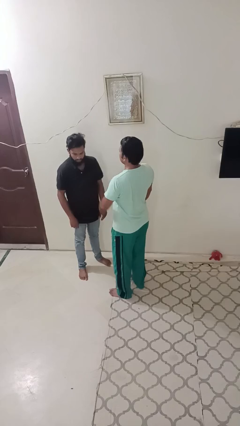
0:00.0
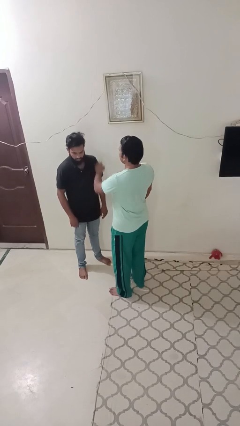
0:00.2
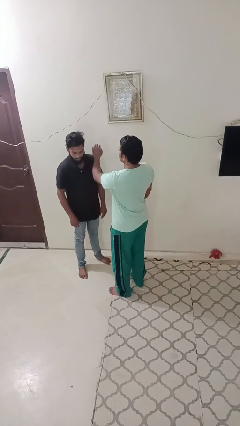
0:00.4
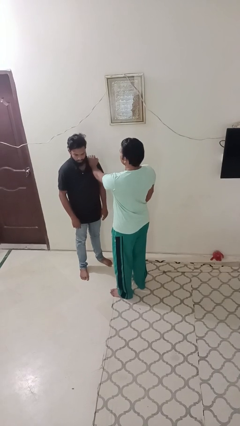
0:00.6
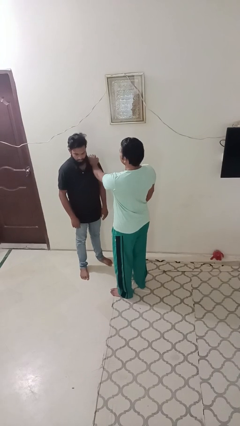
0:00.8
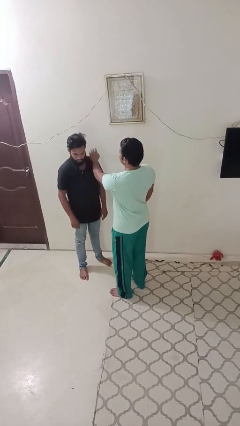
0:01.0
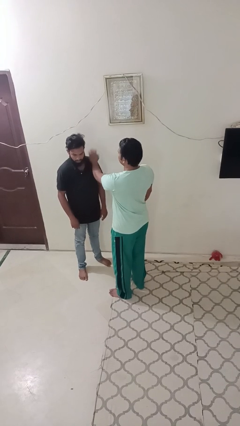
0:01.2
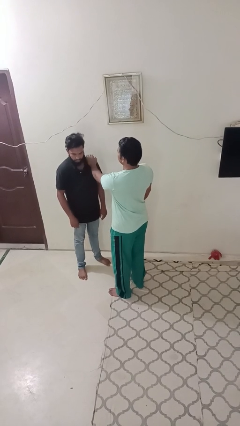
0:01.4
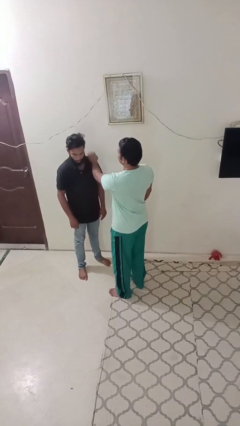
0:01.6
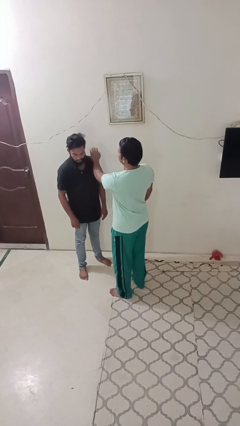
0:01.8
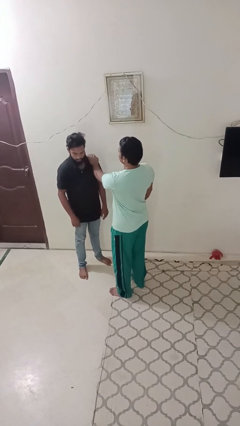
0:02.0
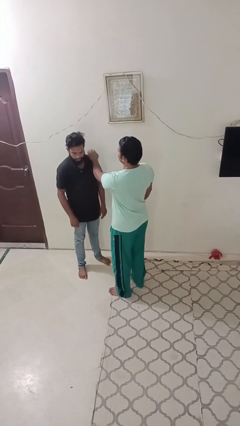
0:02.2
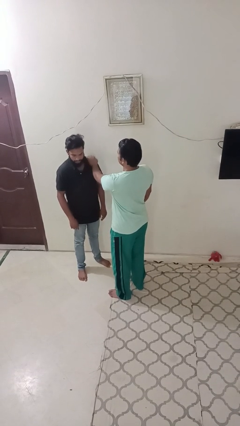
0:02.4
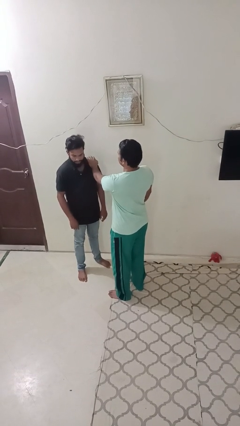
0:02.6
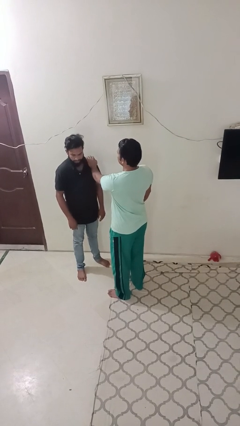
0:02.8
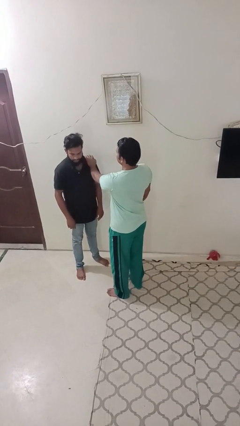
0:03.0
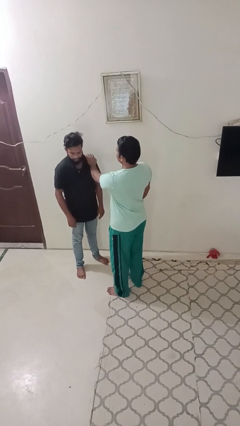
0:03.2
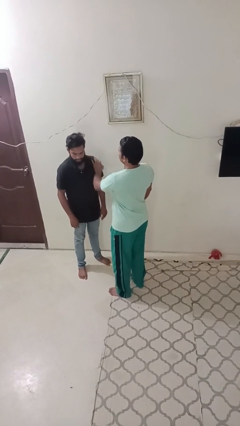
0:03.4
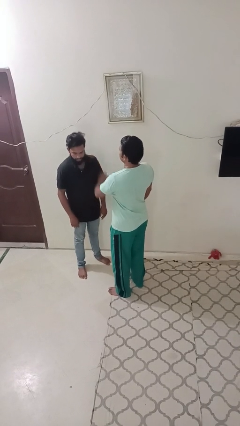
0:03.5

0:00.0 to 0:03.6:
person pounds shoulders of person

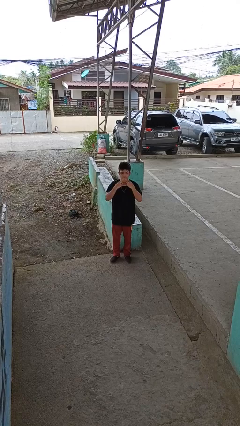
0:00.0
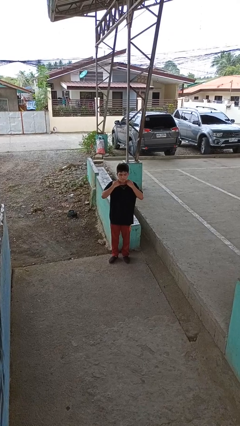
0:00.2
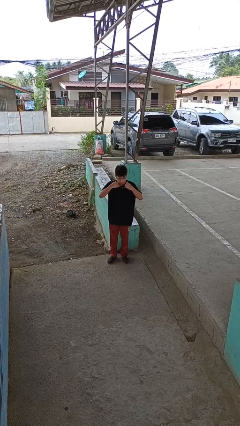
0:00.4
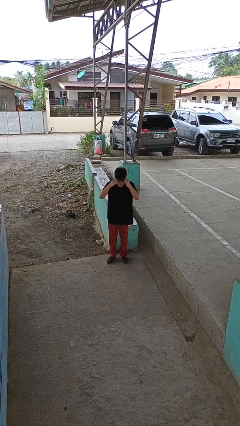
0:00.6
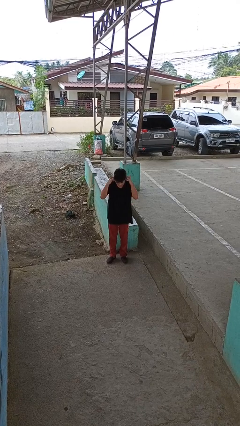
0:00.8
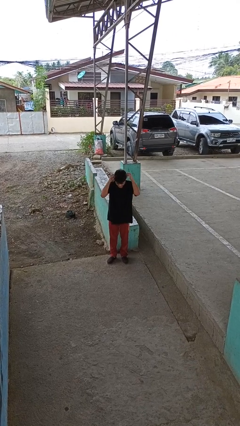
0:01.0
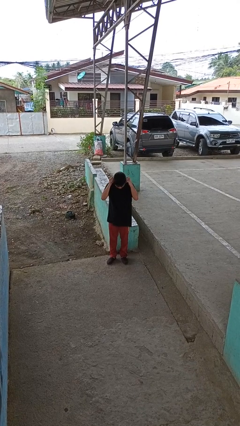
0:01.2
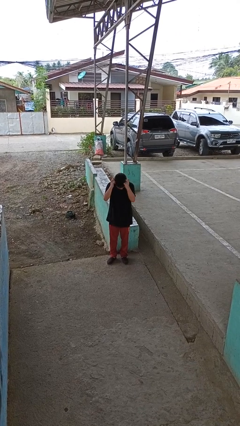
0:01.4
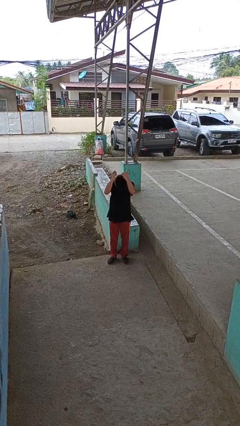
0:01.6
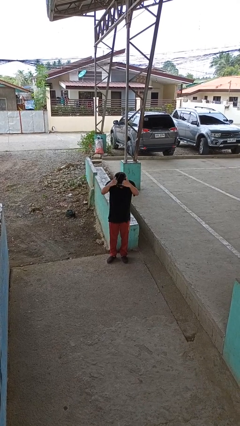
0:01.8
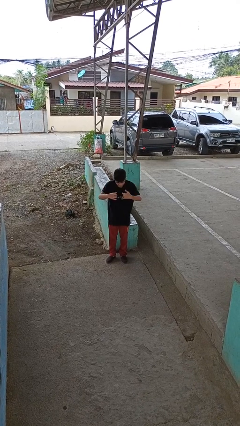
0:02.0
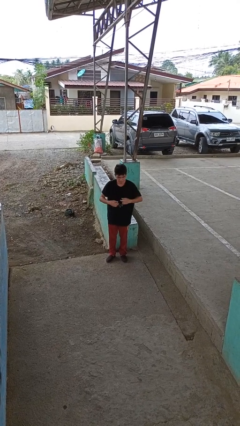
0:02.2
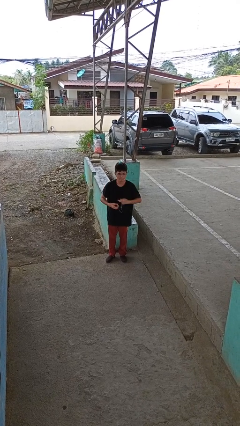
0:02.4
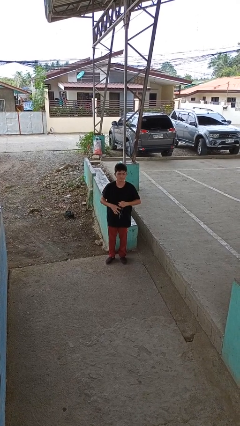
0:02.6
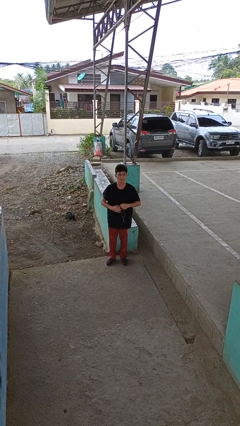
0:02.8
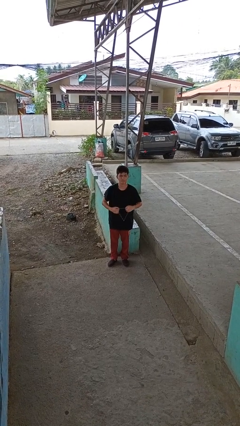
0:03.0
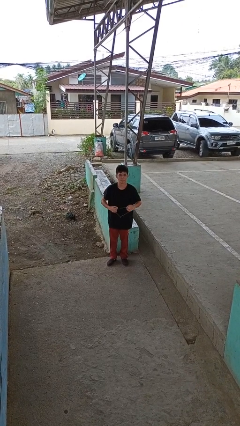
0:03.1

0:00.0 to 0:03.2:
person takes off necklace

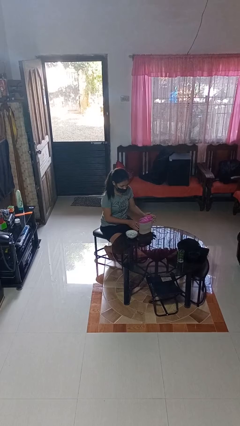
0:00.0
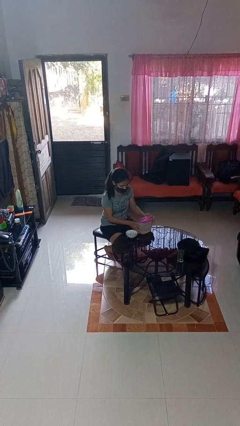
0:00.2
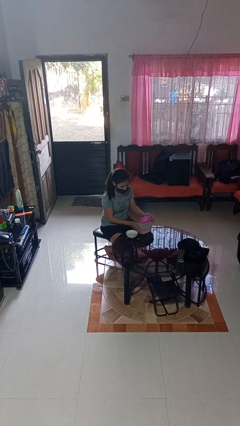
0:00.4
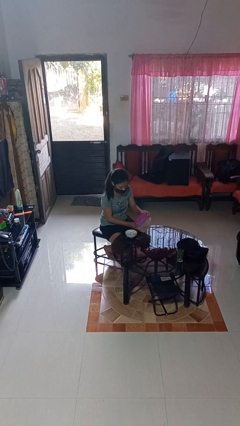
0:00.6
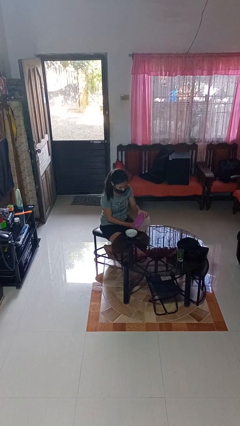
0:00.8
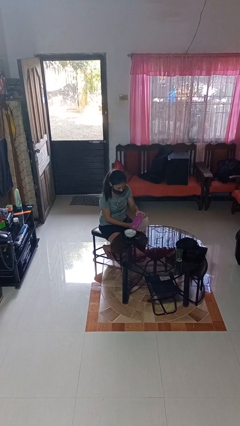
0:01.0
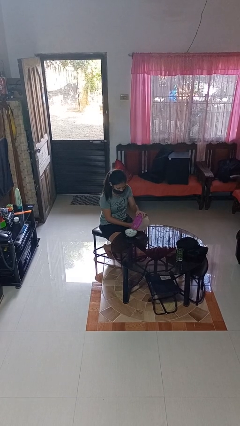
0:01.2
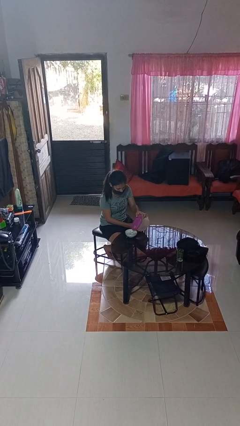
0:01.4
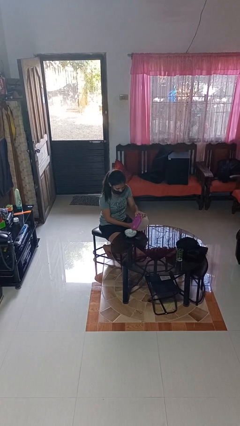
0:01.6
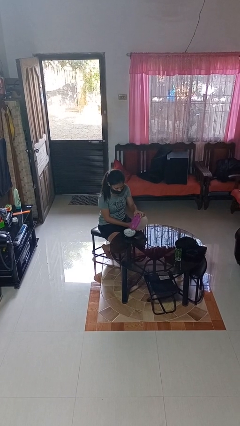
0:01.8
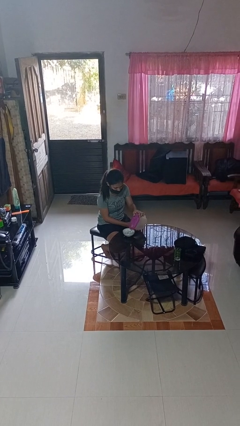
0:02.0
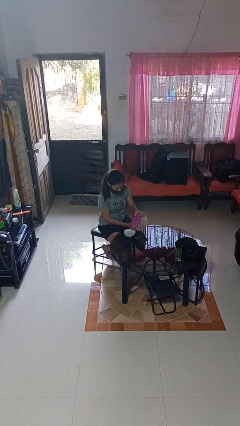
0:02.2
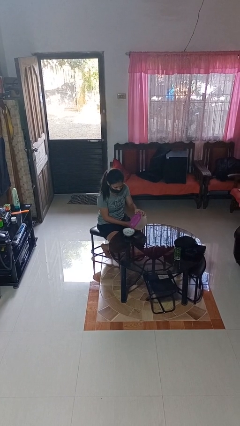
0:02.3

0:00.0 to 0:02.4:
person pours into bowl

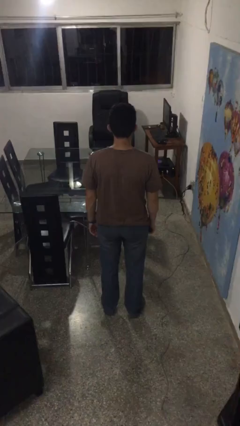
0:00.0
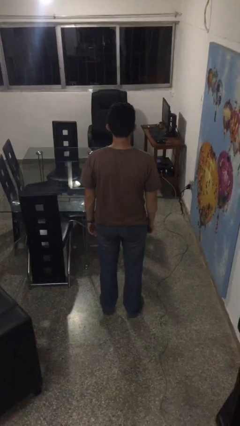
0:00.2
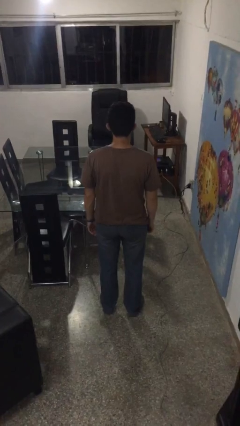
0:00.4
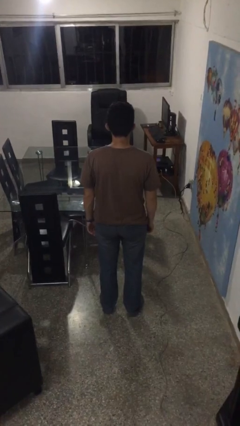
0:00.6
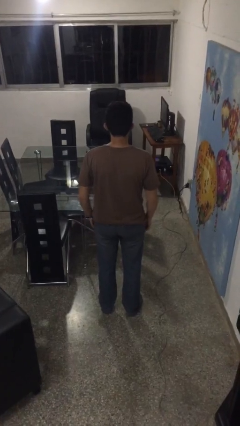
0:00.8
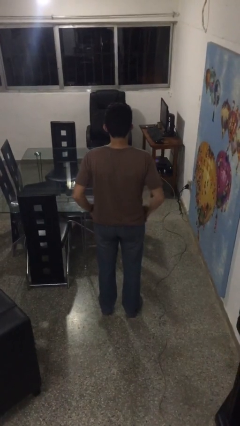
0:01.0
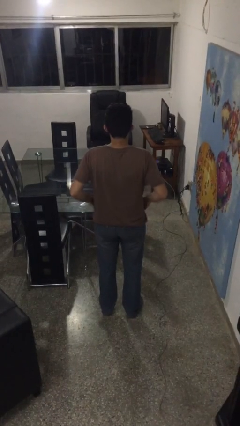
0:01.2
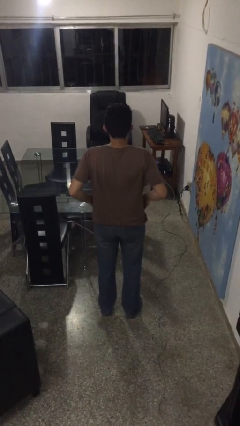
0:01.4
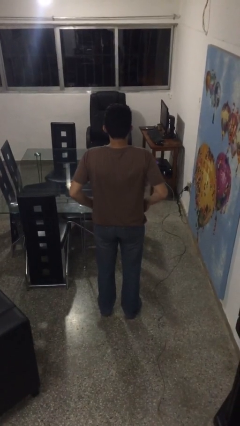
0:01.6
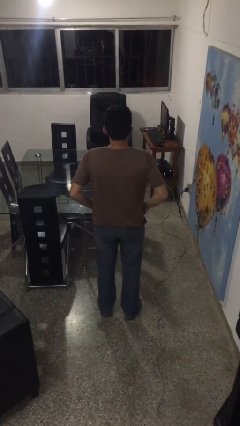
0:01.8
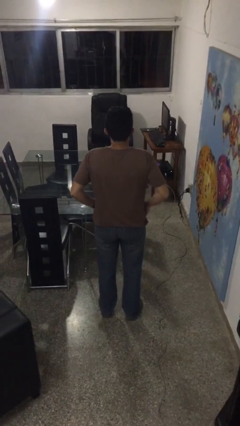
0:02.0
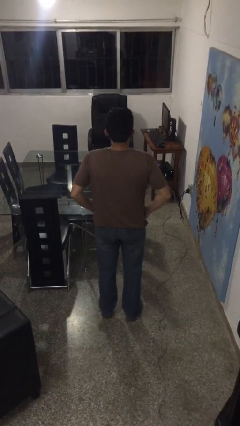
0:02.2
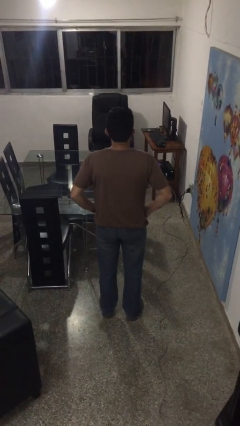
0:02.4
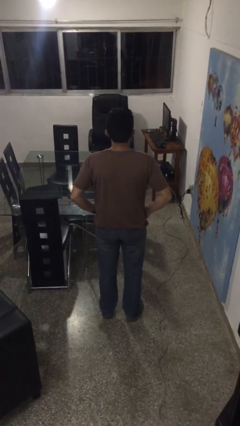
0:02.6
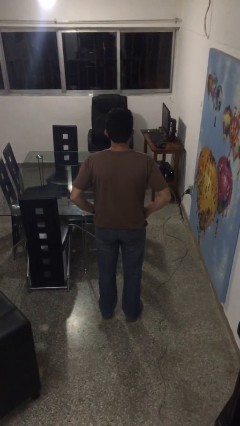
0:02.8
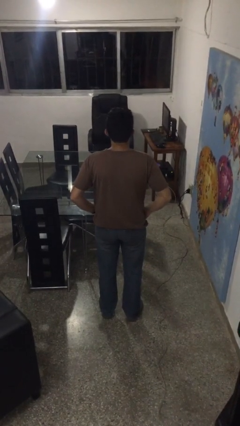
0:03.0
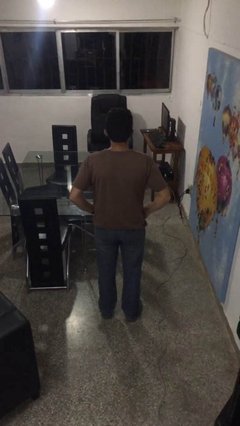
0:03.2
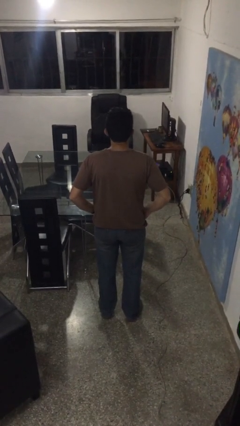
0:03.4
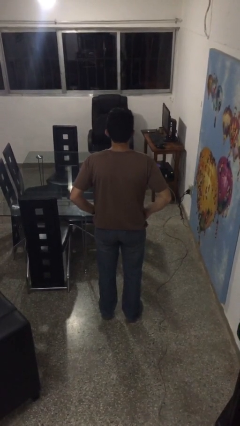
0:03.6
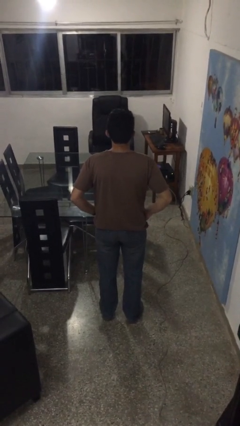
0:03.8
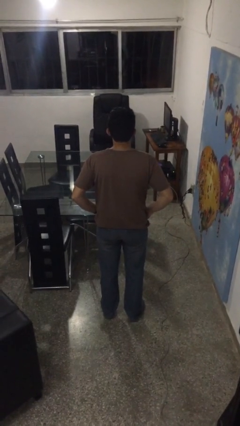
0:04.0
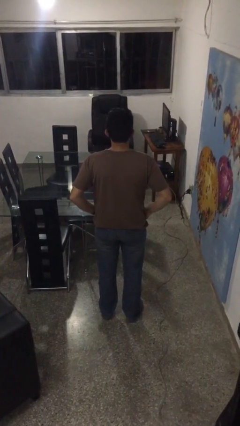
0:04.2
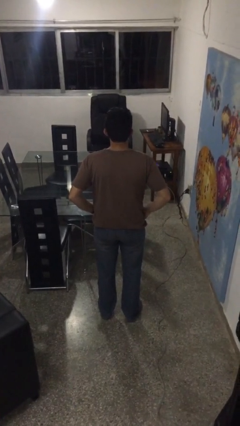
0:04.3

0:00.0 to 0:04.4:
person puts hands in back pockets

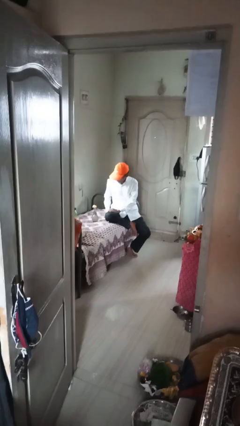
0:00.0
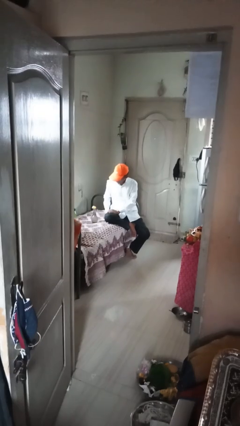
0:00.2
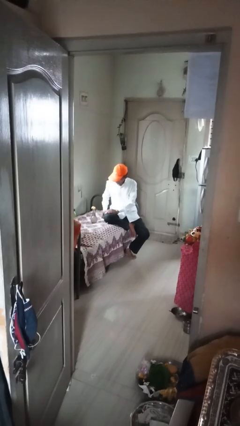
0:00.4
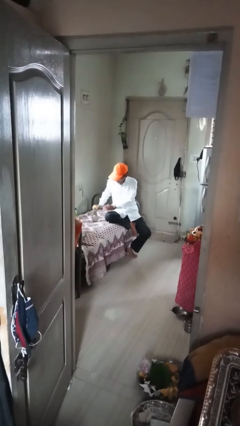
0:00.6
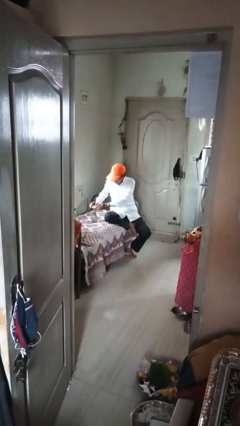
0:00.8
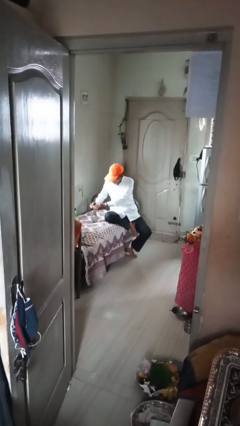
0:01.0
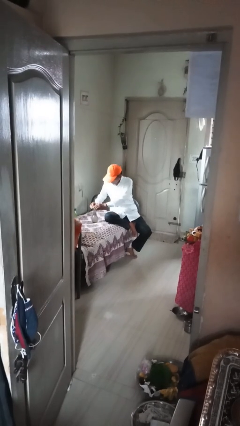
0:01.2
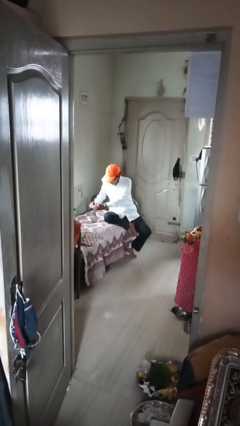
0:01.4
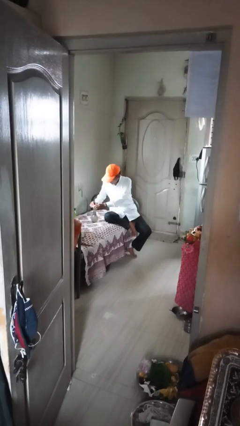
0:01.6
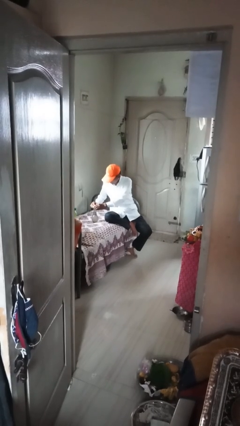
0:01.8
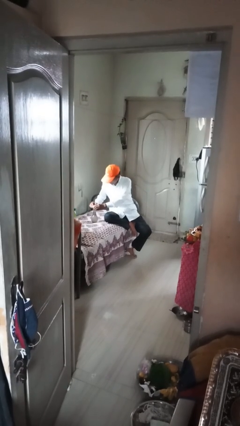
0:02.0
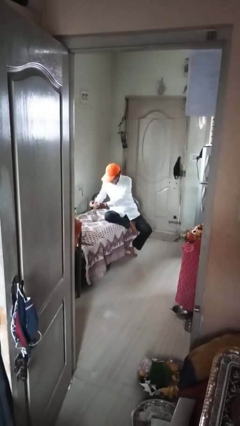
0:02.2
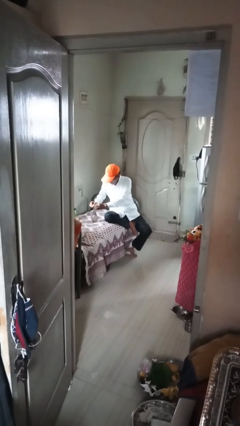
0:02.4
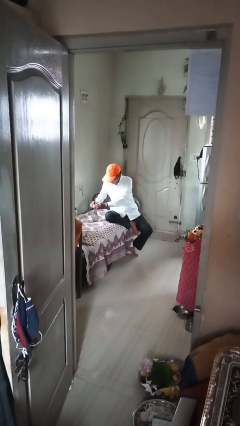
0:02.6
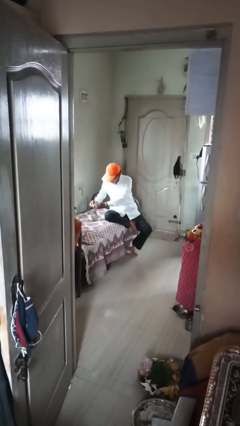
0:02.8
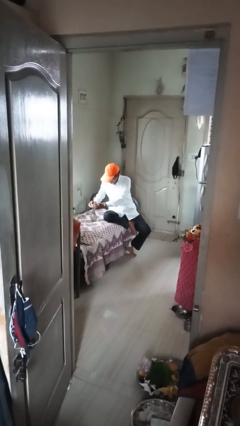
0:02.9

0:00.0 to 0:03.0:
person arranges flowers in vase

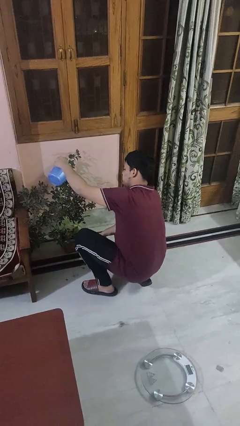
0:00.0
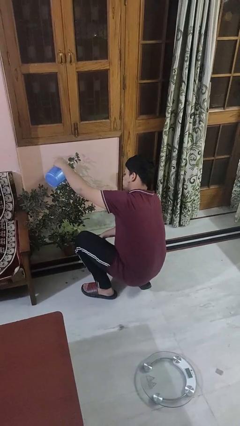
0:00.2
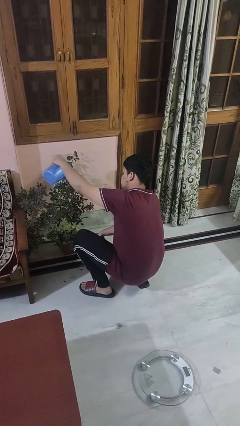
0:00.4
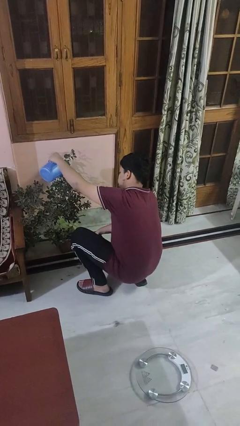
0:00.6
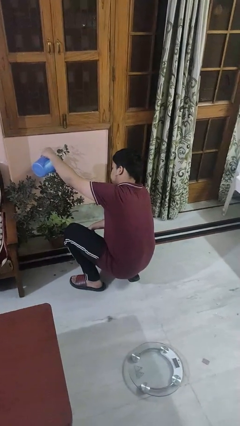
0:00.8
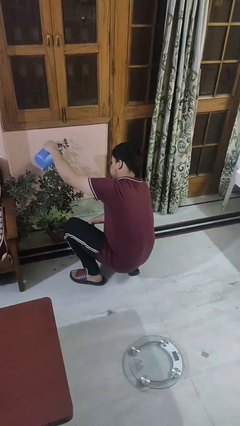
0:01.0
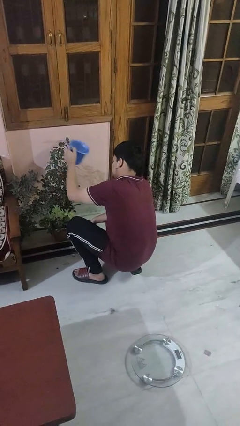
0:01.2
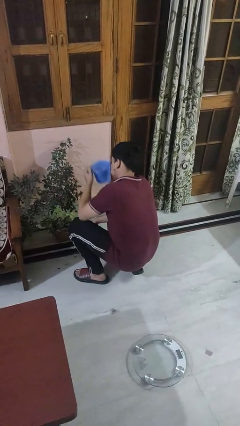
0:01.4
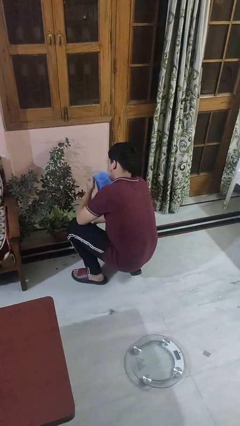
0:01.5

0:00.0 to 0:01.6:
person waters houseplant
